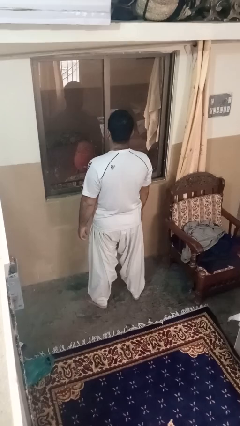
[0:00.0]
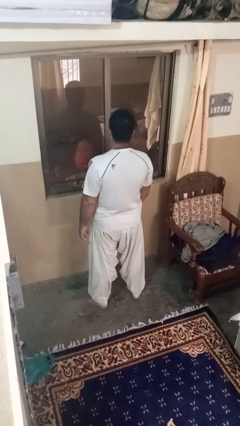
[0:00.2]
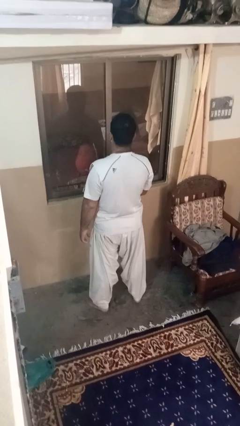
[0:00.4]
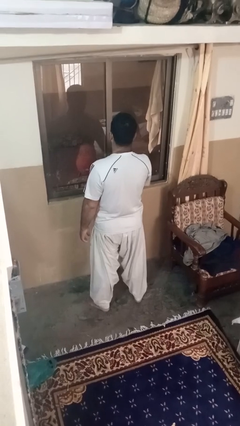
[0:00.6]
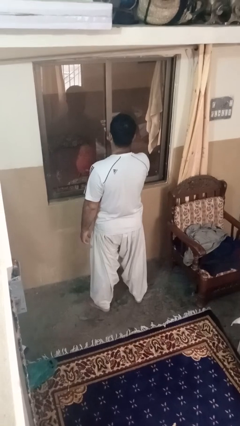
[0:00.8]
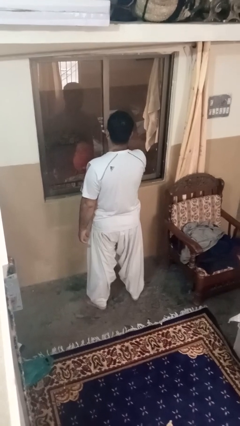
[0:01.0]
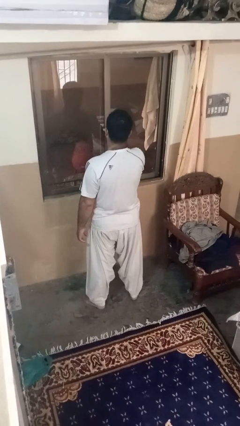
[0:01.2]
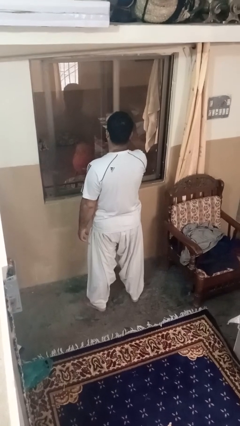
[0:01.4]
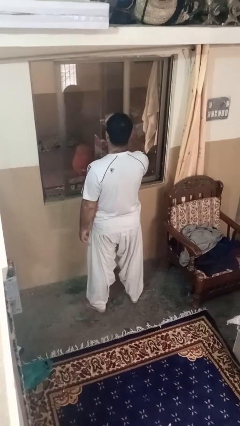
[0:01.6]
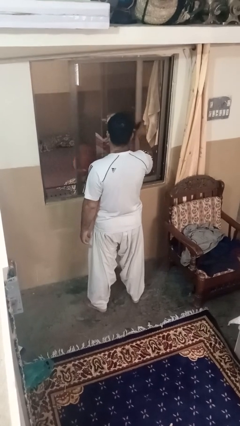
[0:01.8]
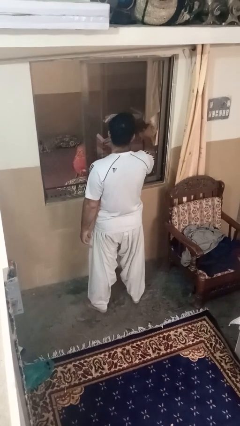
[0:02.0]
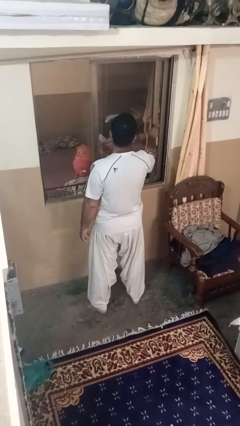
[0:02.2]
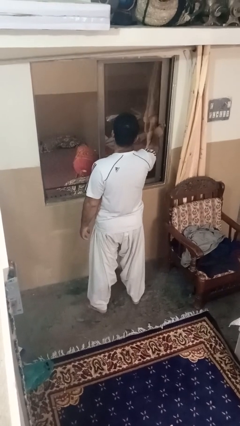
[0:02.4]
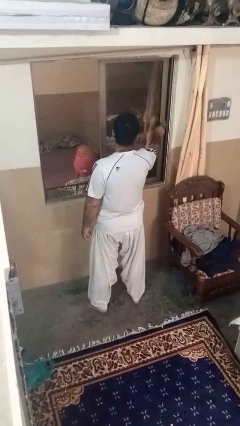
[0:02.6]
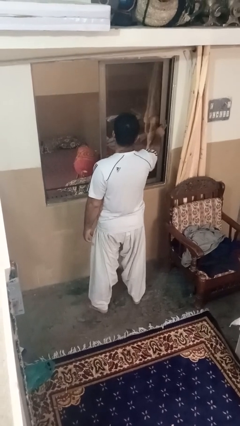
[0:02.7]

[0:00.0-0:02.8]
person opens home window

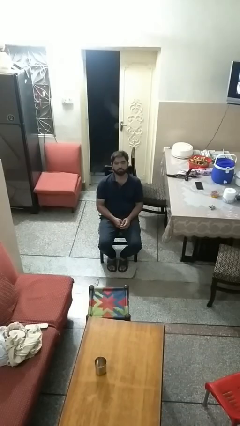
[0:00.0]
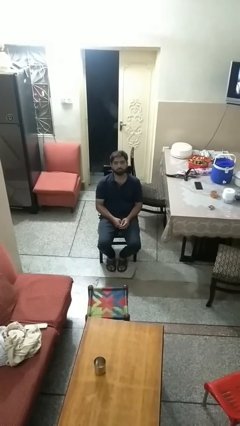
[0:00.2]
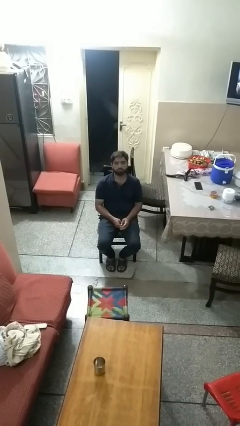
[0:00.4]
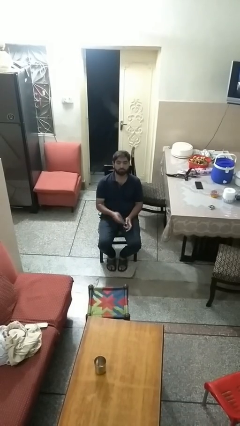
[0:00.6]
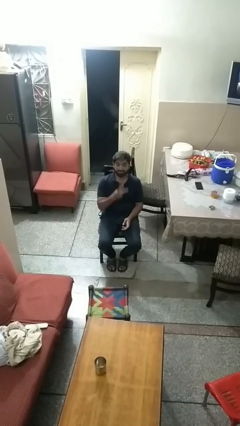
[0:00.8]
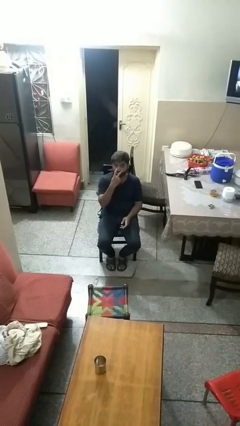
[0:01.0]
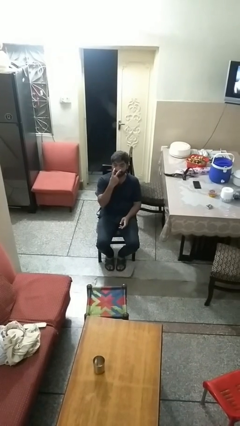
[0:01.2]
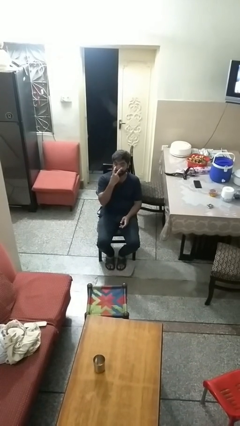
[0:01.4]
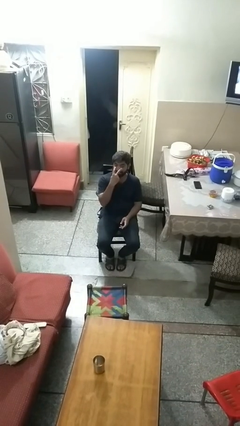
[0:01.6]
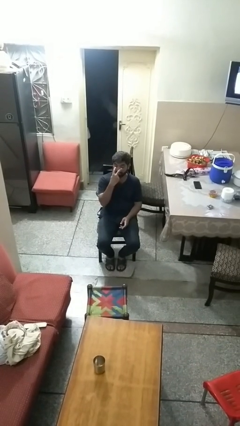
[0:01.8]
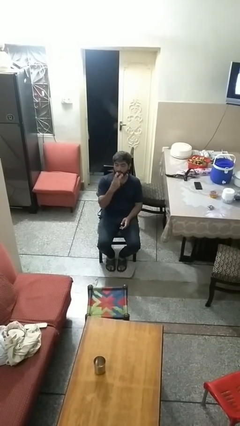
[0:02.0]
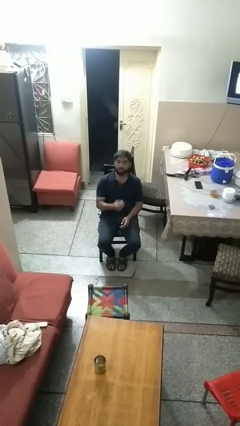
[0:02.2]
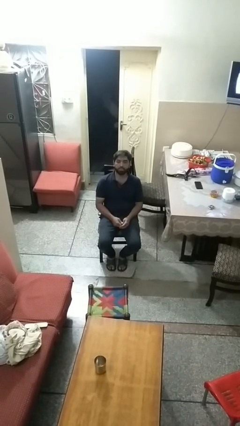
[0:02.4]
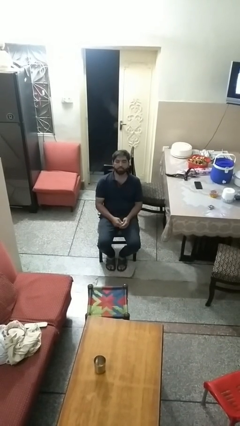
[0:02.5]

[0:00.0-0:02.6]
person gestures watch closely

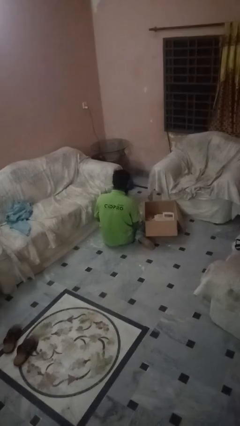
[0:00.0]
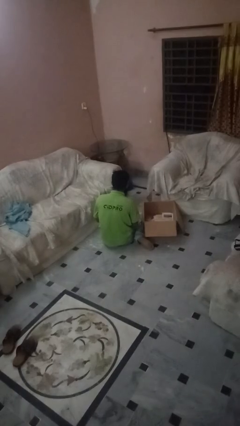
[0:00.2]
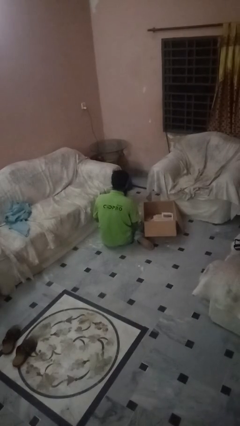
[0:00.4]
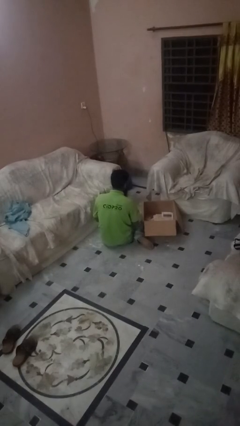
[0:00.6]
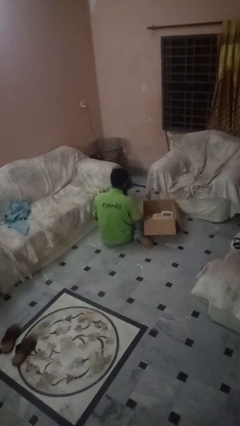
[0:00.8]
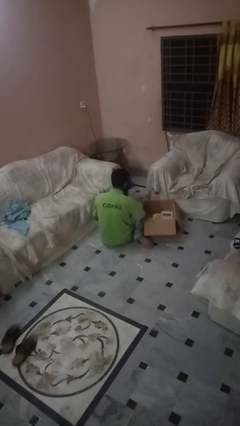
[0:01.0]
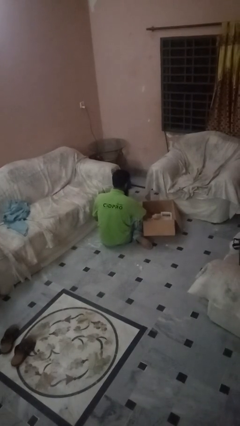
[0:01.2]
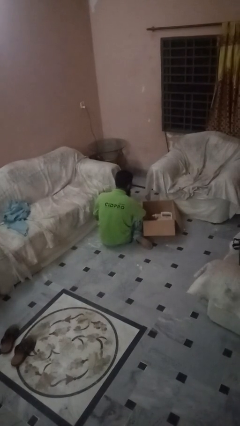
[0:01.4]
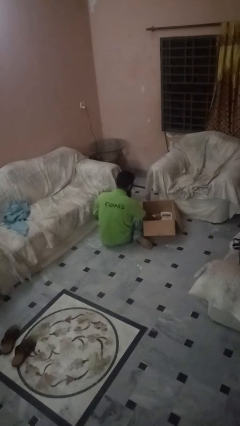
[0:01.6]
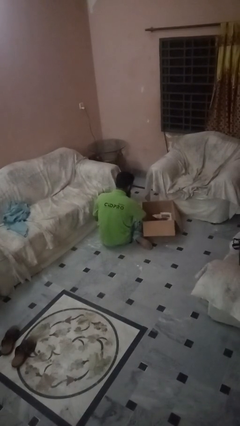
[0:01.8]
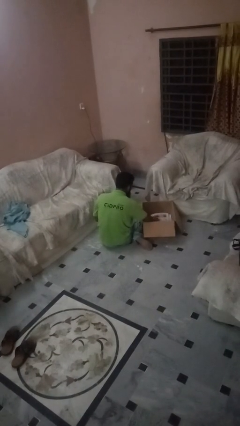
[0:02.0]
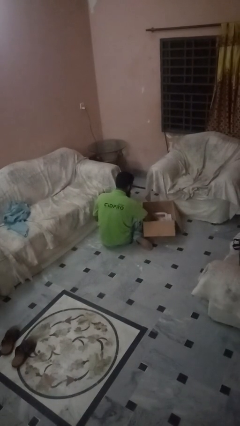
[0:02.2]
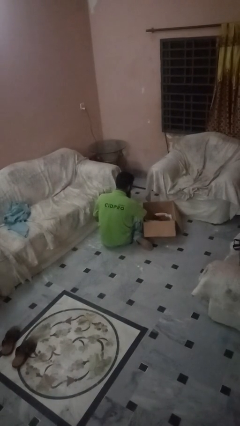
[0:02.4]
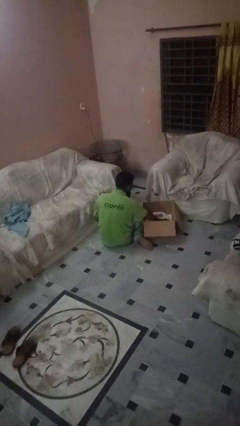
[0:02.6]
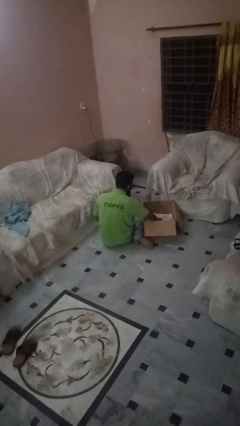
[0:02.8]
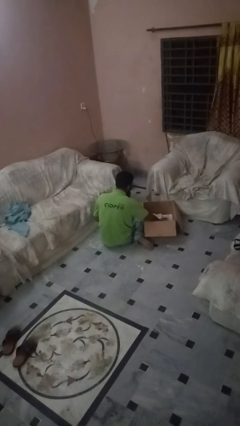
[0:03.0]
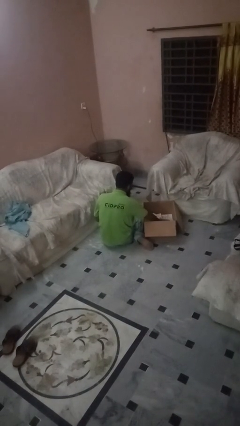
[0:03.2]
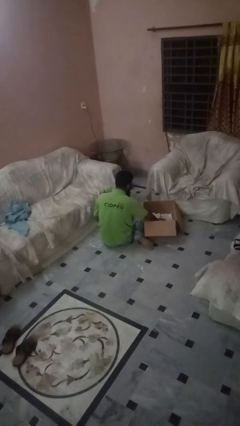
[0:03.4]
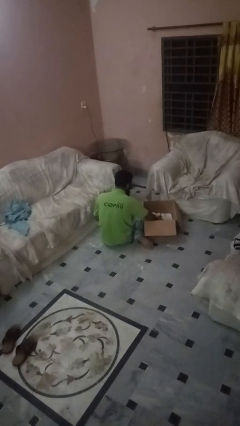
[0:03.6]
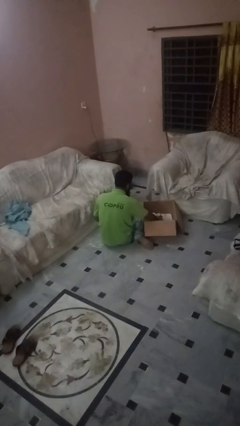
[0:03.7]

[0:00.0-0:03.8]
person searches in box

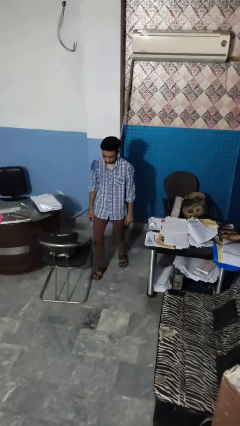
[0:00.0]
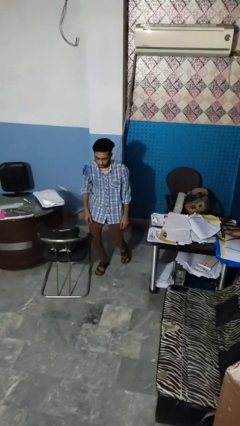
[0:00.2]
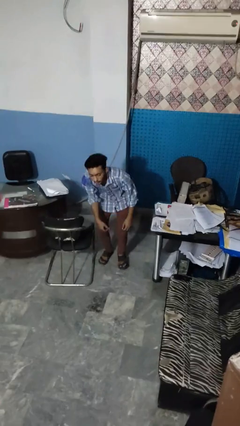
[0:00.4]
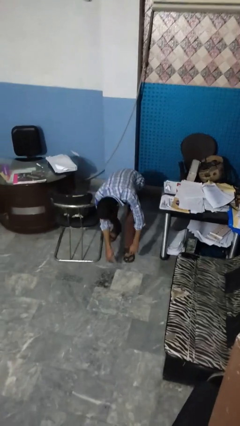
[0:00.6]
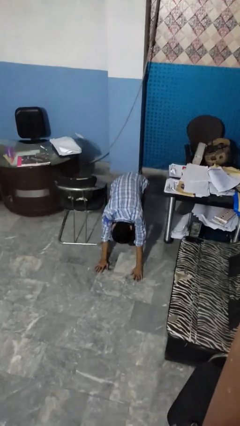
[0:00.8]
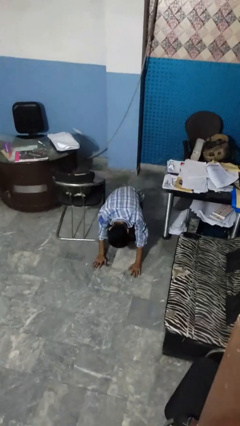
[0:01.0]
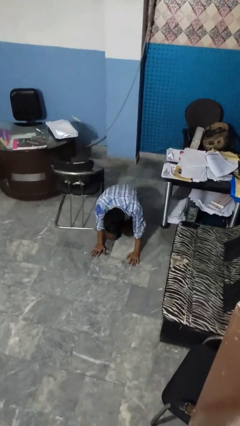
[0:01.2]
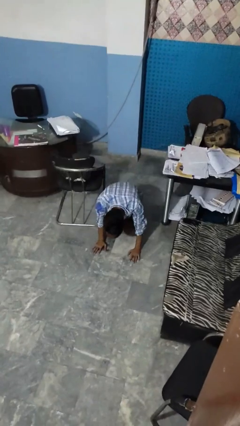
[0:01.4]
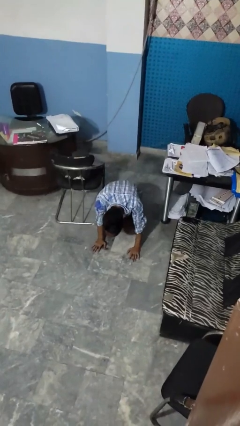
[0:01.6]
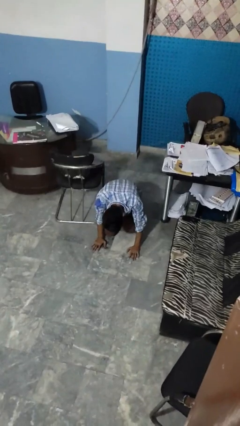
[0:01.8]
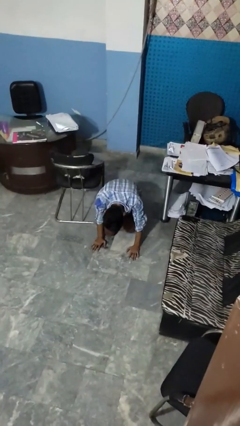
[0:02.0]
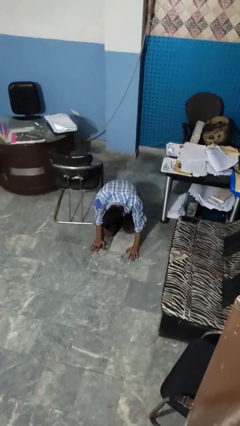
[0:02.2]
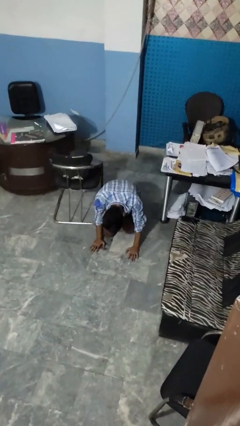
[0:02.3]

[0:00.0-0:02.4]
person trips on object on floor

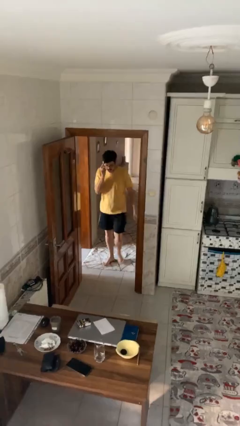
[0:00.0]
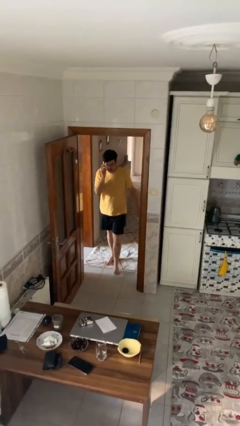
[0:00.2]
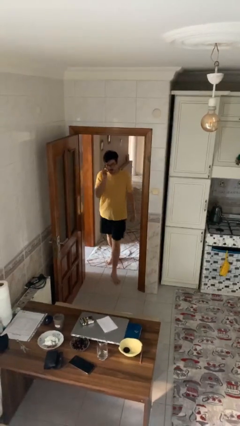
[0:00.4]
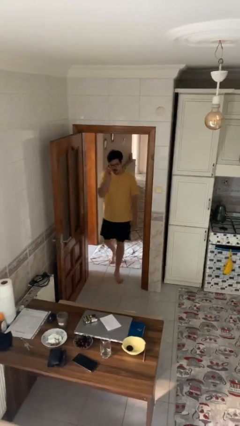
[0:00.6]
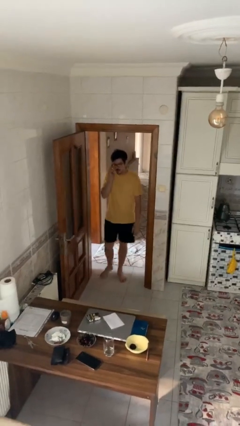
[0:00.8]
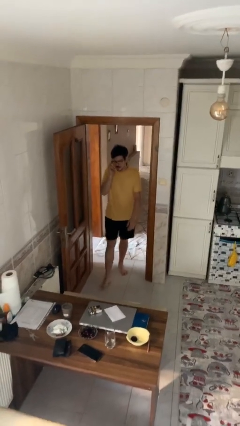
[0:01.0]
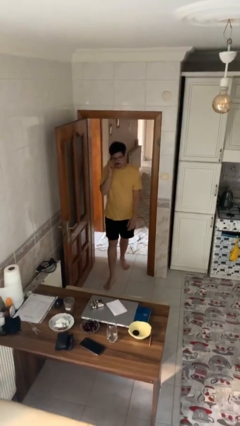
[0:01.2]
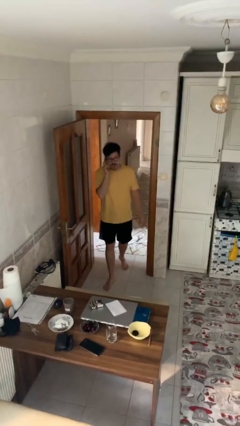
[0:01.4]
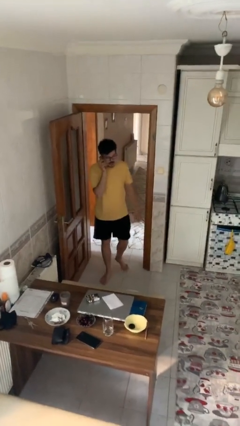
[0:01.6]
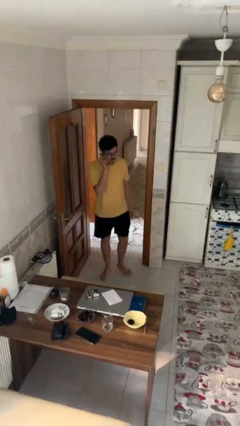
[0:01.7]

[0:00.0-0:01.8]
person enters scene through structure

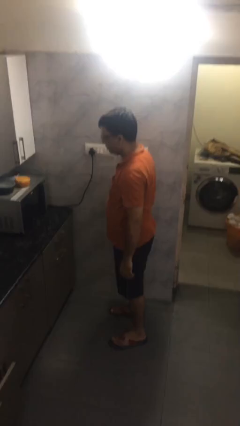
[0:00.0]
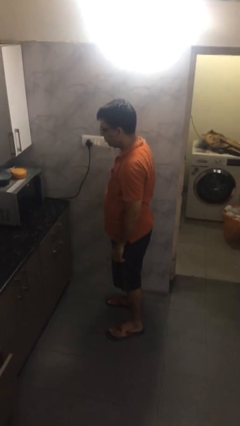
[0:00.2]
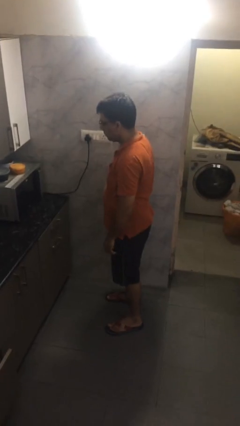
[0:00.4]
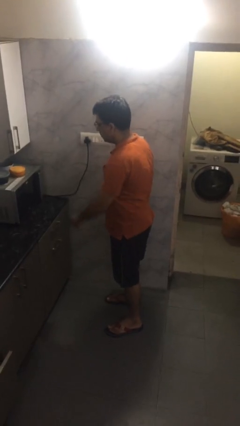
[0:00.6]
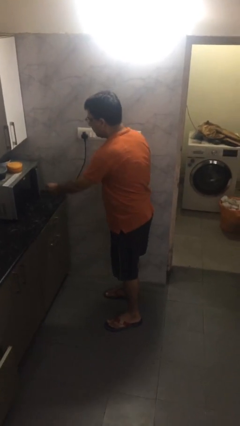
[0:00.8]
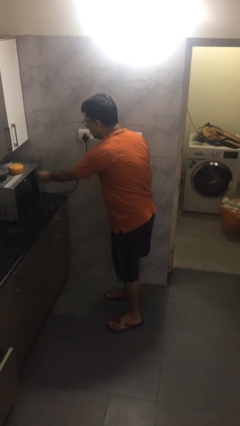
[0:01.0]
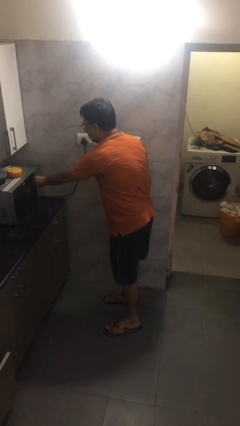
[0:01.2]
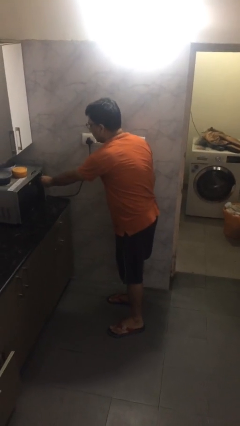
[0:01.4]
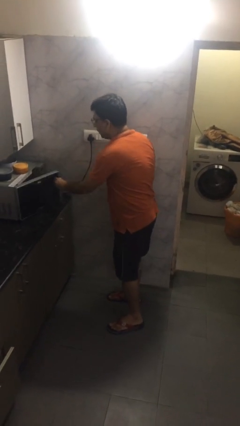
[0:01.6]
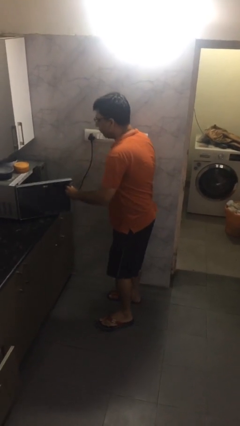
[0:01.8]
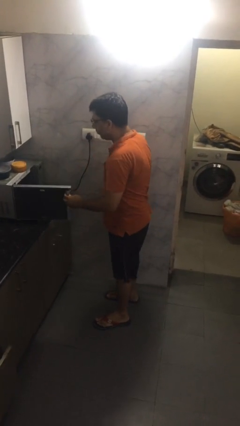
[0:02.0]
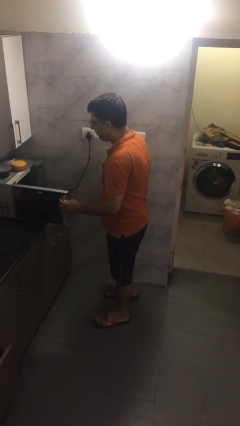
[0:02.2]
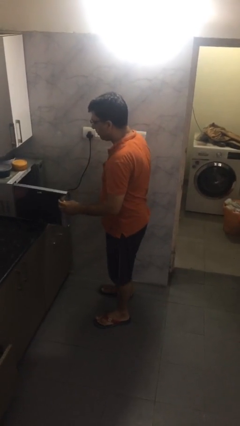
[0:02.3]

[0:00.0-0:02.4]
person opens microwave

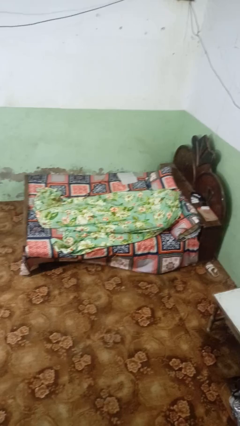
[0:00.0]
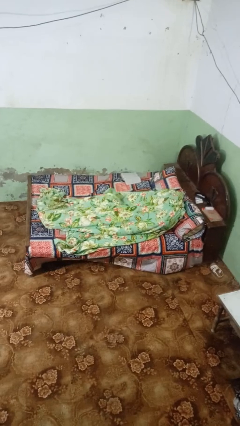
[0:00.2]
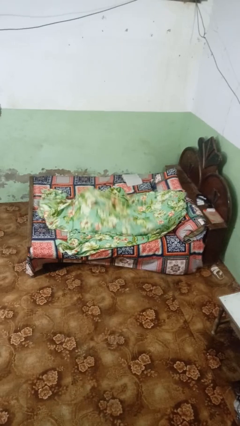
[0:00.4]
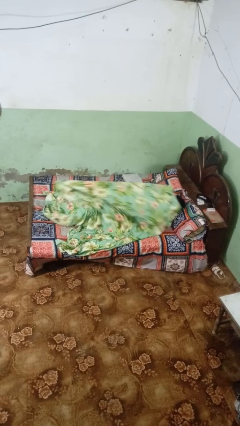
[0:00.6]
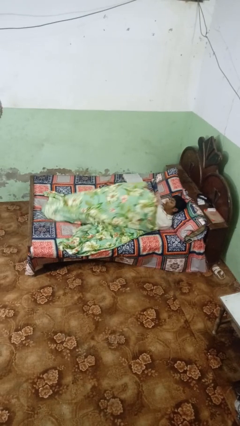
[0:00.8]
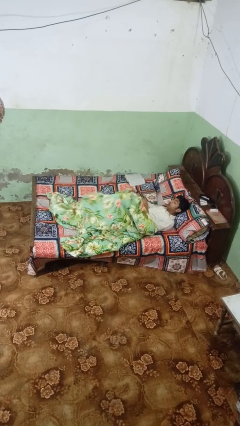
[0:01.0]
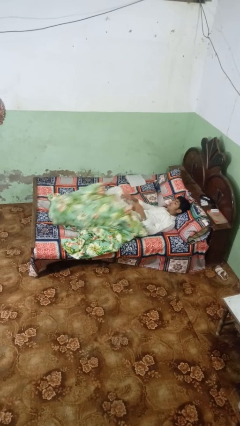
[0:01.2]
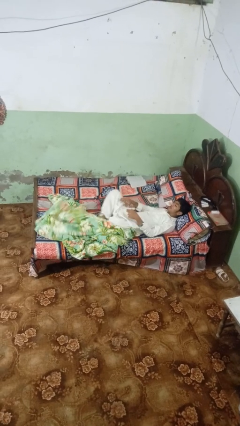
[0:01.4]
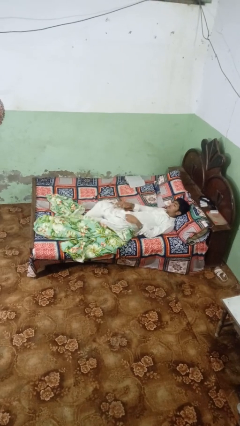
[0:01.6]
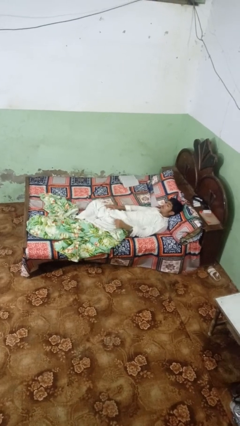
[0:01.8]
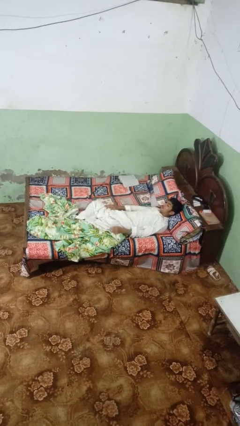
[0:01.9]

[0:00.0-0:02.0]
person uncovers with bedsheets
